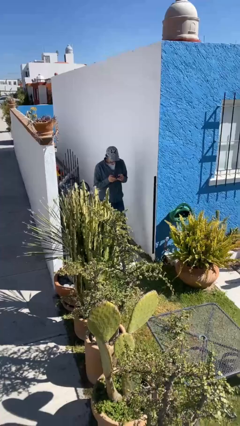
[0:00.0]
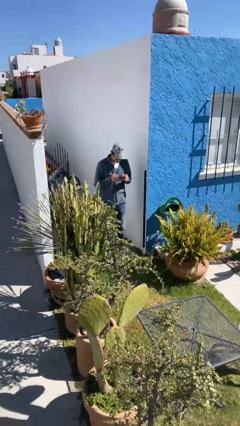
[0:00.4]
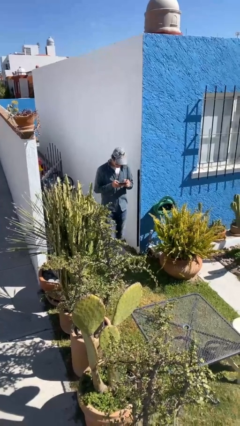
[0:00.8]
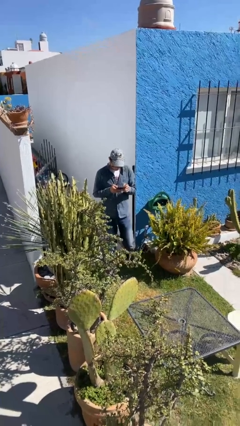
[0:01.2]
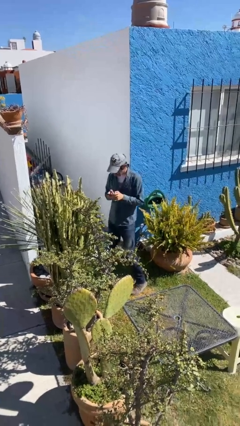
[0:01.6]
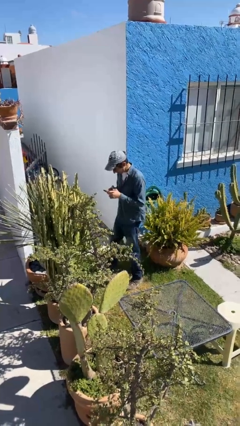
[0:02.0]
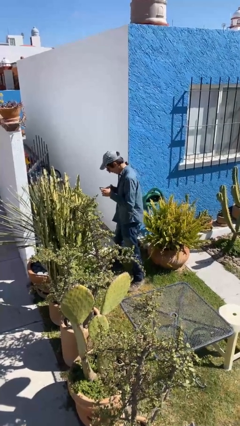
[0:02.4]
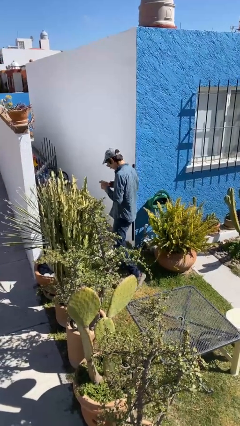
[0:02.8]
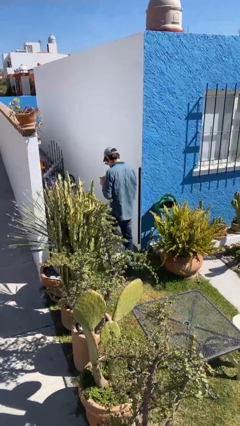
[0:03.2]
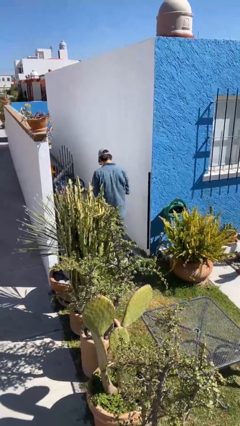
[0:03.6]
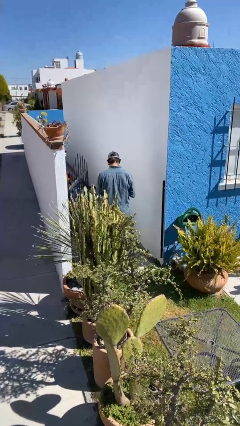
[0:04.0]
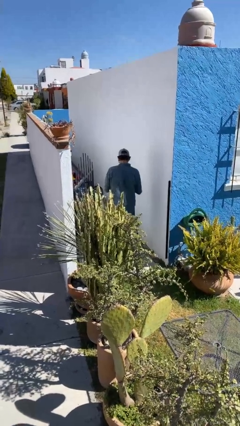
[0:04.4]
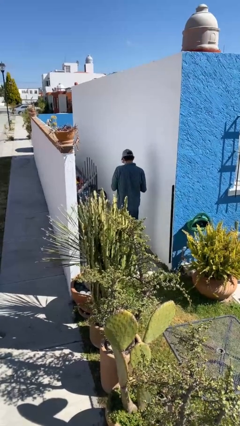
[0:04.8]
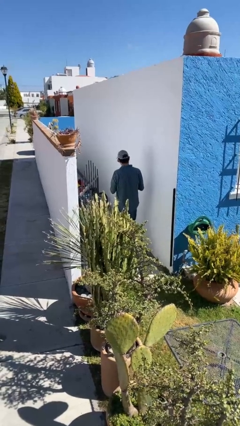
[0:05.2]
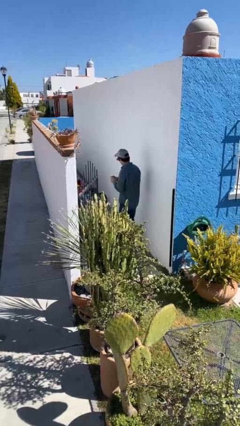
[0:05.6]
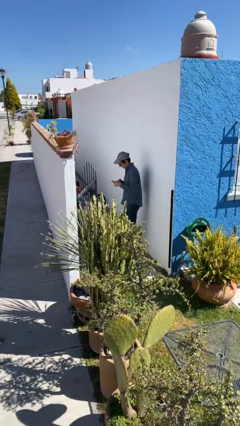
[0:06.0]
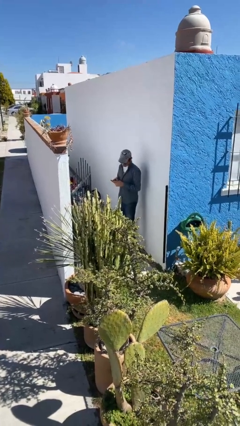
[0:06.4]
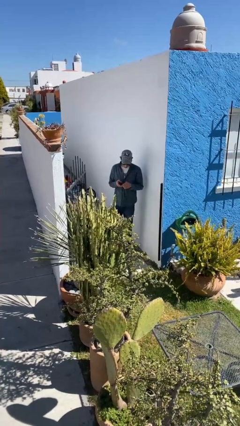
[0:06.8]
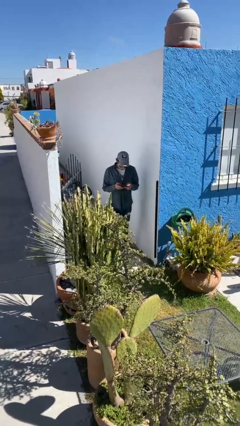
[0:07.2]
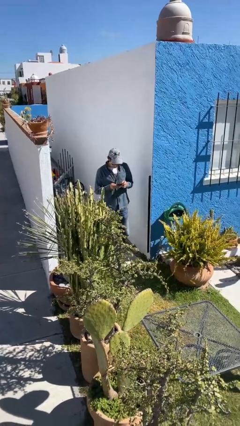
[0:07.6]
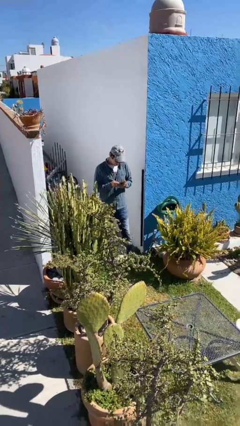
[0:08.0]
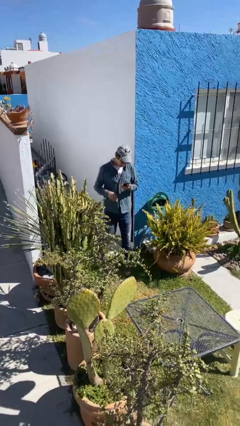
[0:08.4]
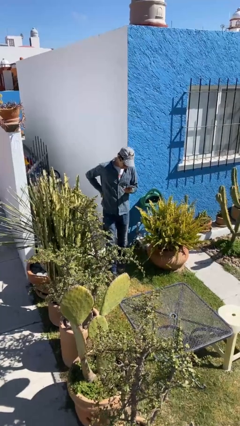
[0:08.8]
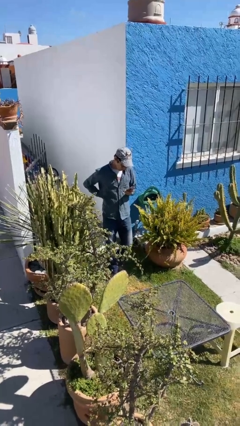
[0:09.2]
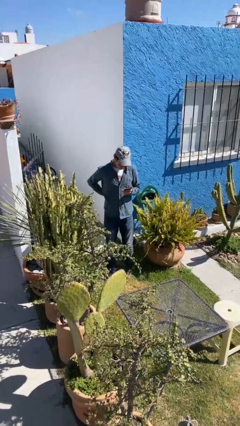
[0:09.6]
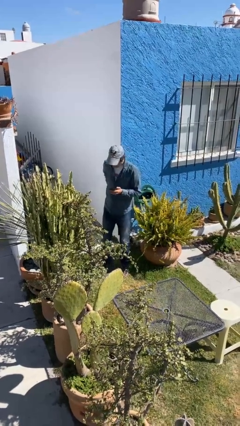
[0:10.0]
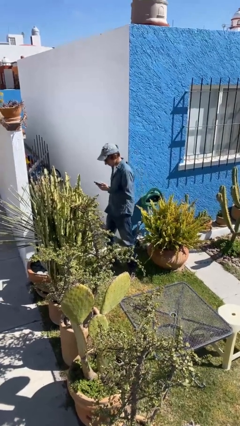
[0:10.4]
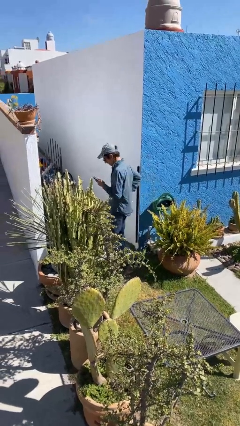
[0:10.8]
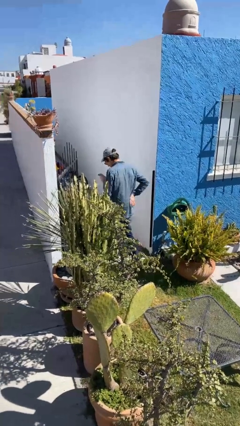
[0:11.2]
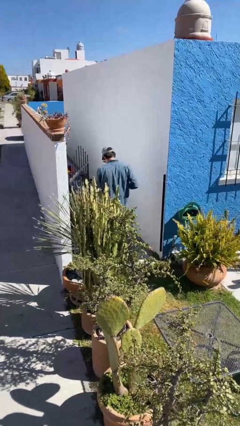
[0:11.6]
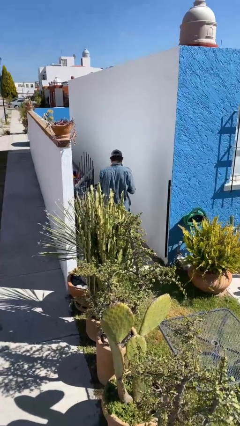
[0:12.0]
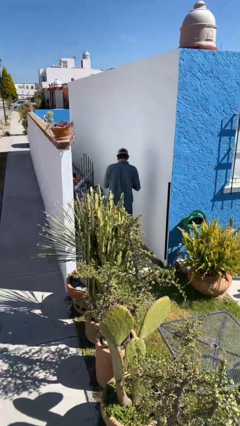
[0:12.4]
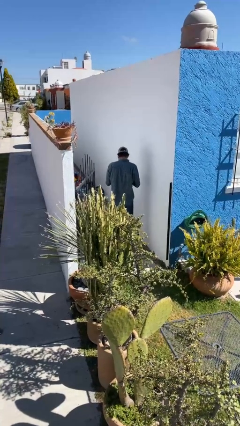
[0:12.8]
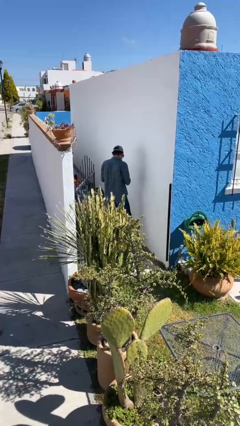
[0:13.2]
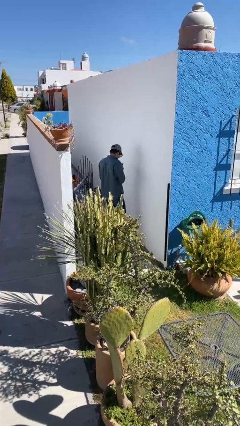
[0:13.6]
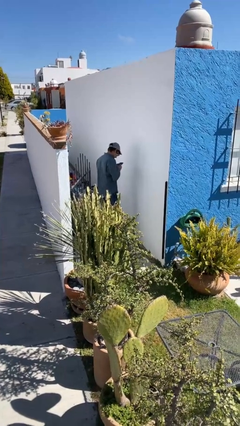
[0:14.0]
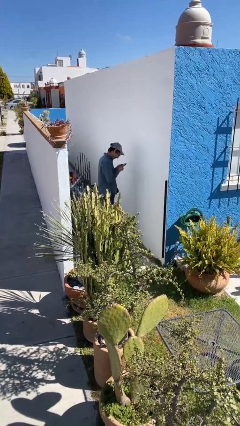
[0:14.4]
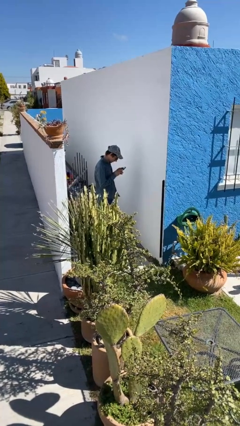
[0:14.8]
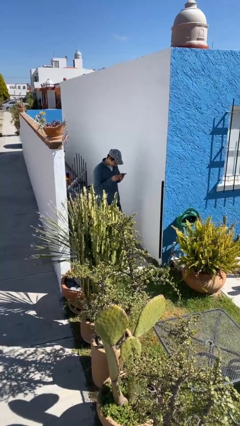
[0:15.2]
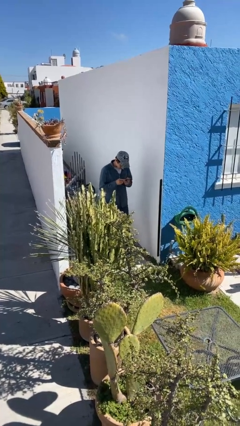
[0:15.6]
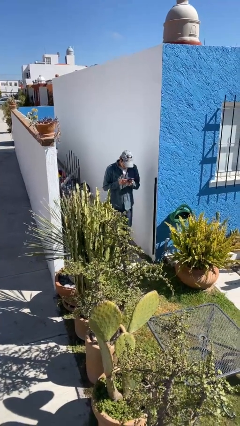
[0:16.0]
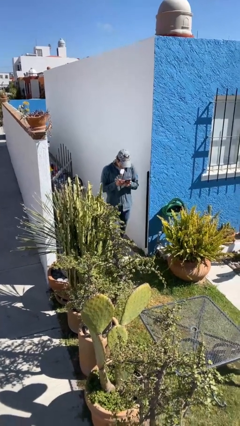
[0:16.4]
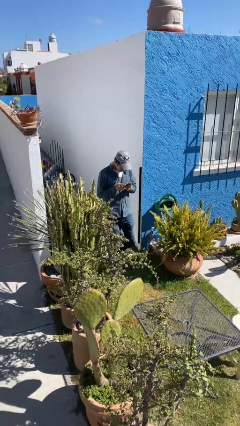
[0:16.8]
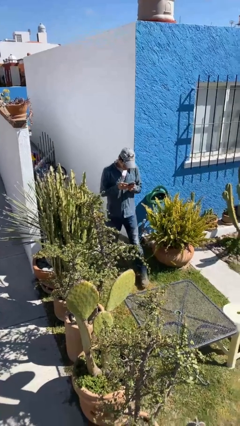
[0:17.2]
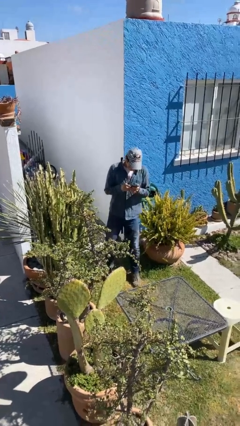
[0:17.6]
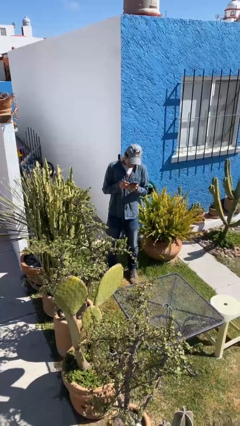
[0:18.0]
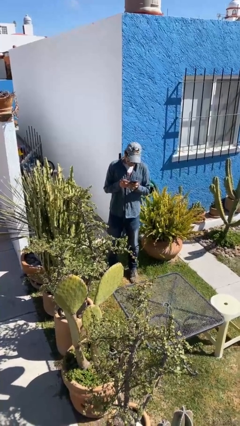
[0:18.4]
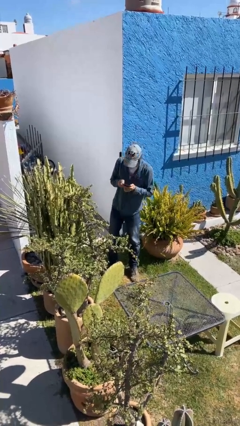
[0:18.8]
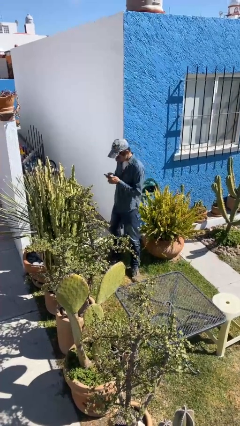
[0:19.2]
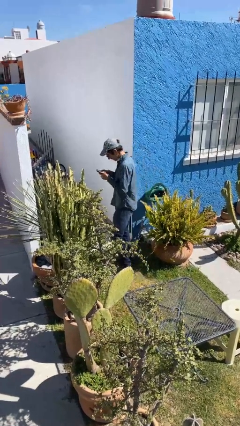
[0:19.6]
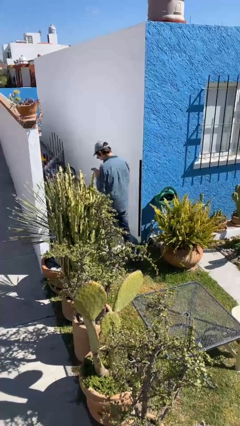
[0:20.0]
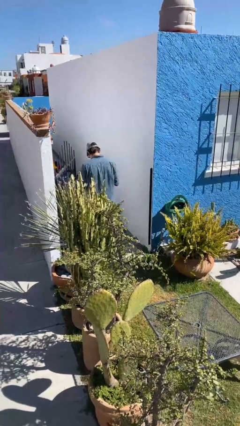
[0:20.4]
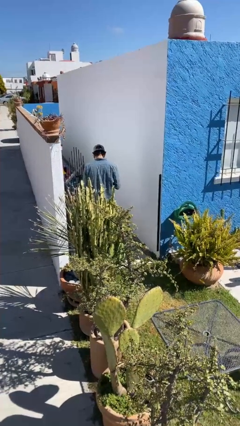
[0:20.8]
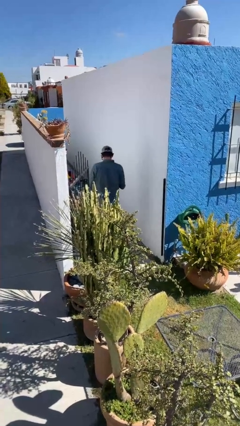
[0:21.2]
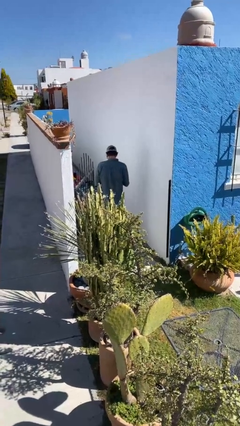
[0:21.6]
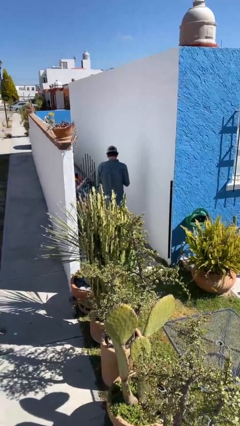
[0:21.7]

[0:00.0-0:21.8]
person texts on phone

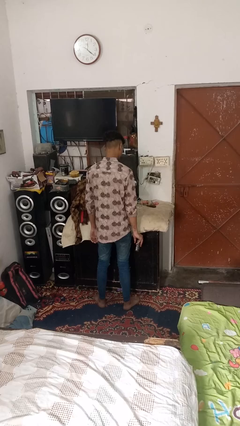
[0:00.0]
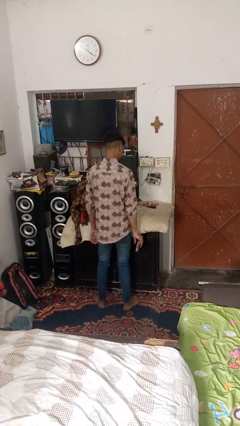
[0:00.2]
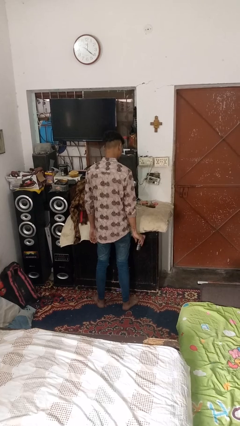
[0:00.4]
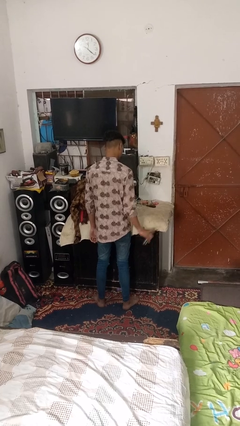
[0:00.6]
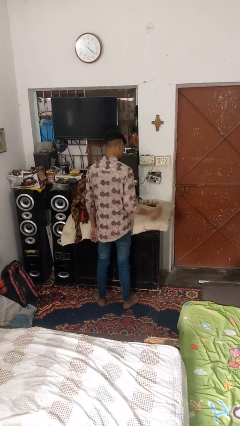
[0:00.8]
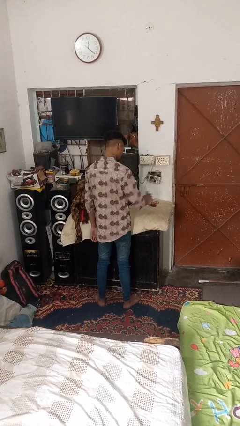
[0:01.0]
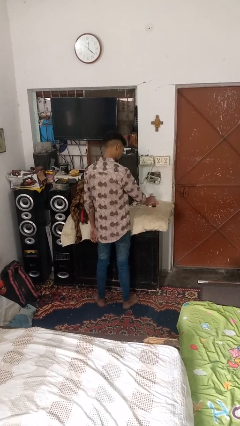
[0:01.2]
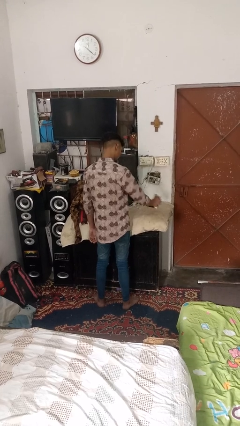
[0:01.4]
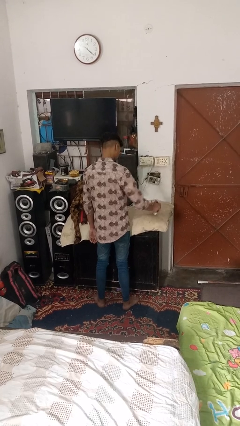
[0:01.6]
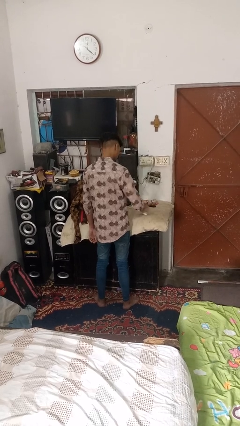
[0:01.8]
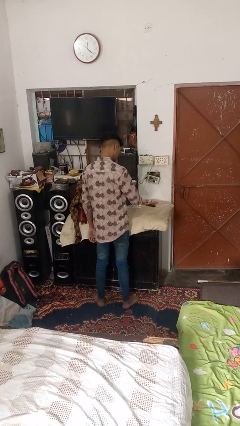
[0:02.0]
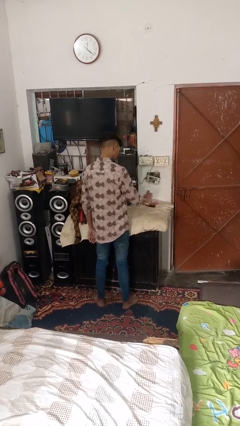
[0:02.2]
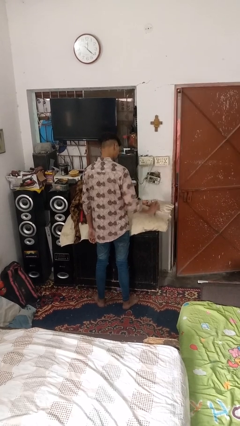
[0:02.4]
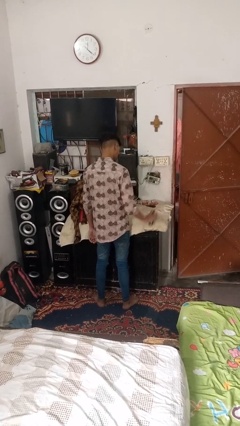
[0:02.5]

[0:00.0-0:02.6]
person sprays from bottle

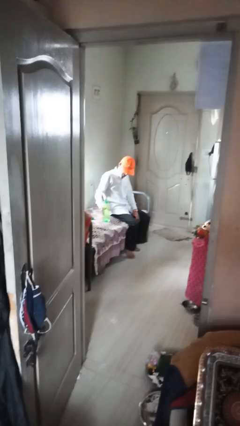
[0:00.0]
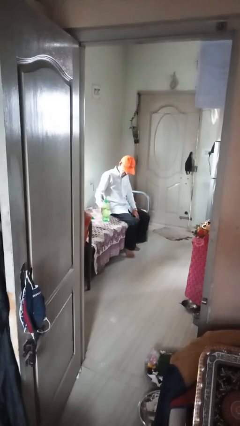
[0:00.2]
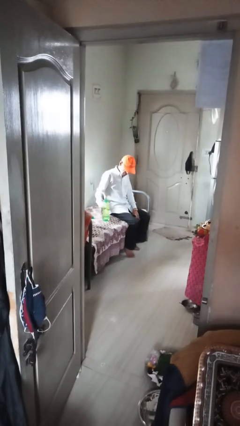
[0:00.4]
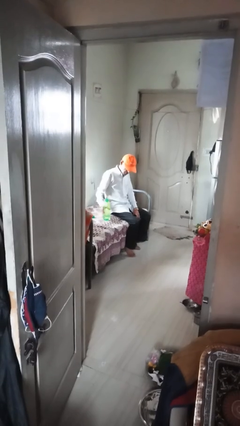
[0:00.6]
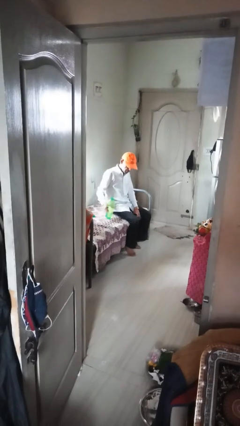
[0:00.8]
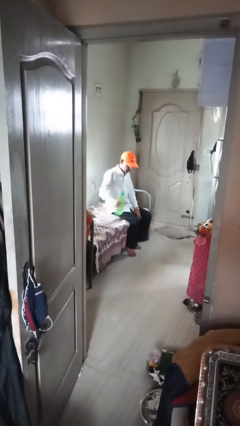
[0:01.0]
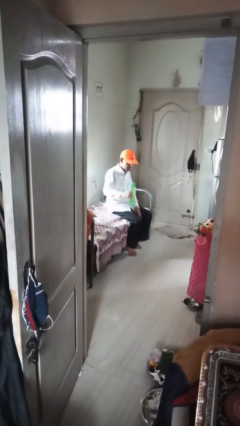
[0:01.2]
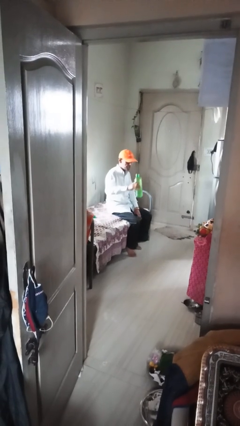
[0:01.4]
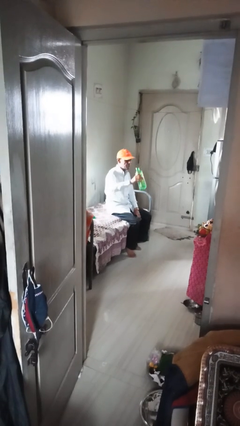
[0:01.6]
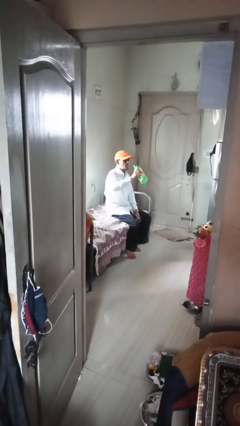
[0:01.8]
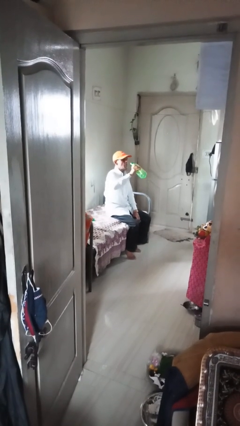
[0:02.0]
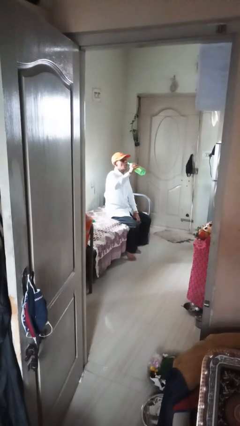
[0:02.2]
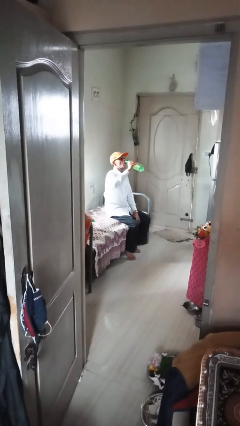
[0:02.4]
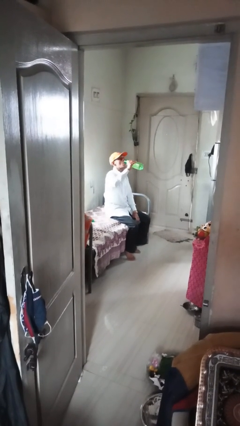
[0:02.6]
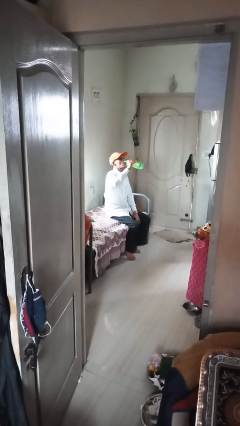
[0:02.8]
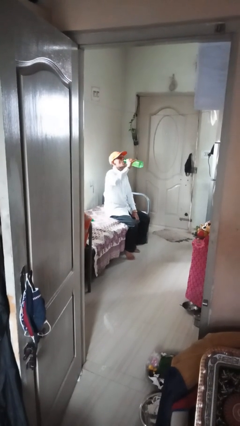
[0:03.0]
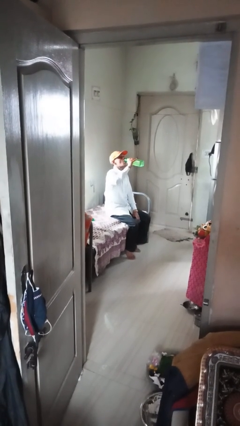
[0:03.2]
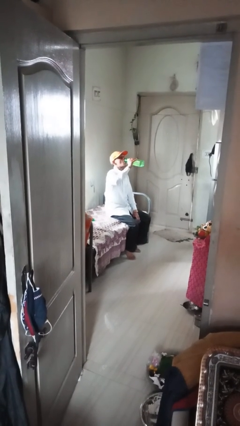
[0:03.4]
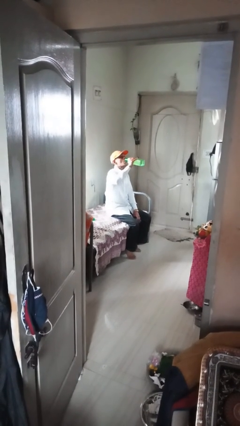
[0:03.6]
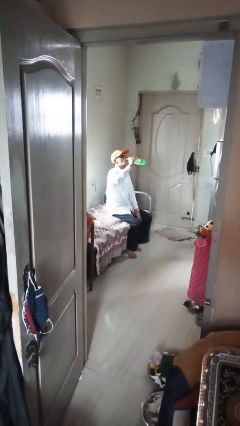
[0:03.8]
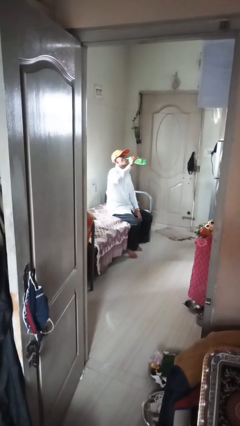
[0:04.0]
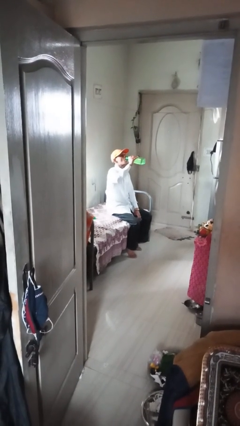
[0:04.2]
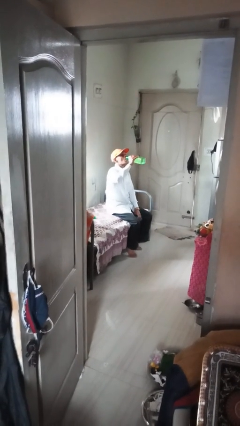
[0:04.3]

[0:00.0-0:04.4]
person drinks from bottle
